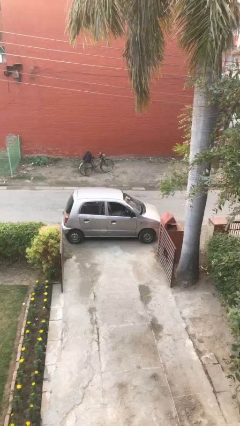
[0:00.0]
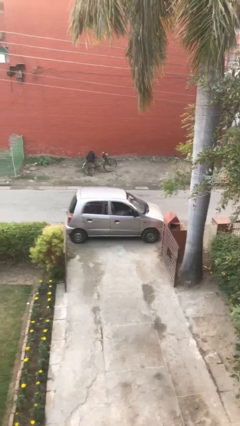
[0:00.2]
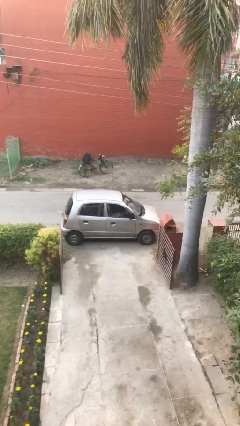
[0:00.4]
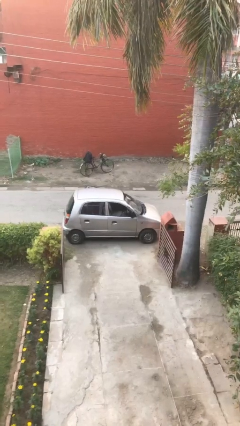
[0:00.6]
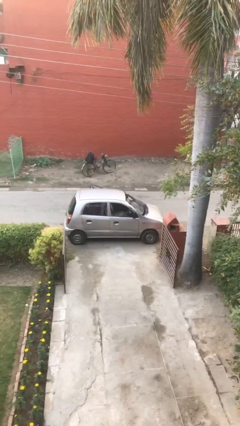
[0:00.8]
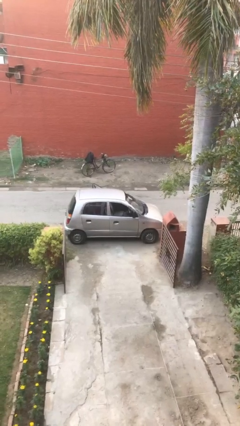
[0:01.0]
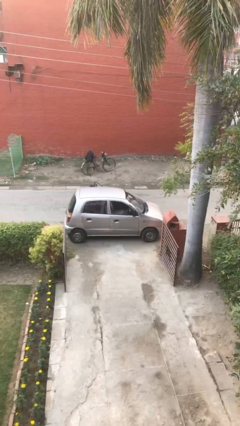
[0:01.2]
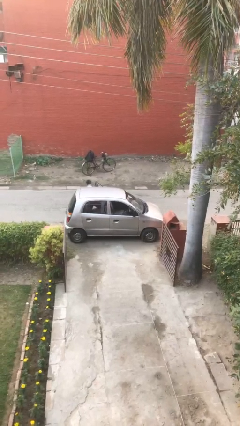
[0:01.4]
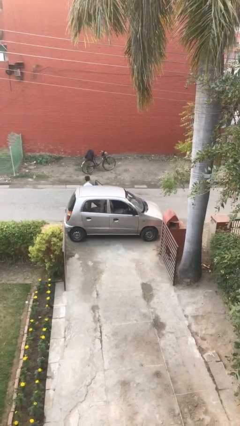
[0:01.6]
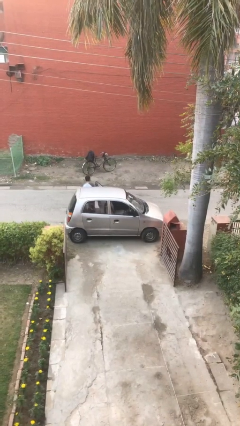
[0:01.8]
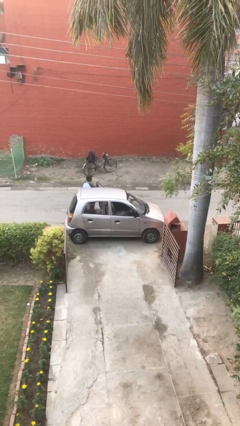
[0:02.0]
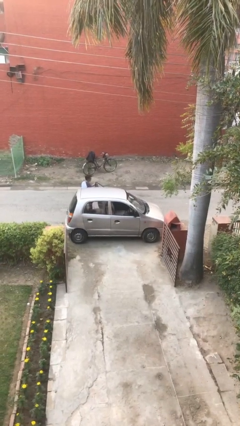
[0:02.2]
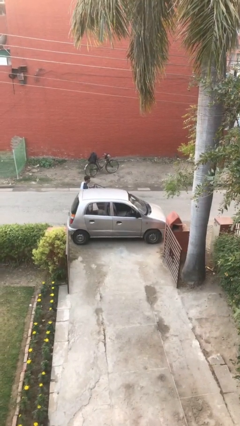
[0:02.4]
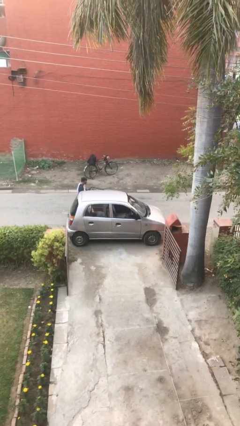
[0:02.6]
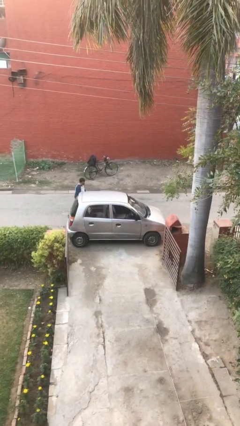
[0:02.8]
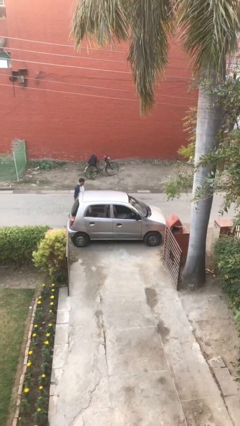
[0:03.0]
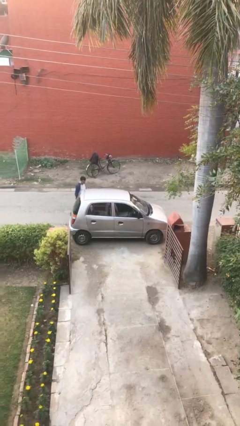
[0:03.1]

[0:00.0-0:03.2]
car drops off person

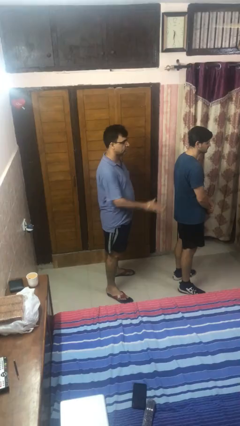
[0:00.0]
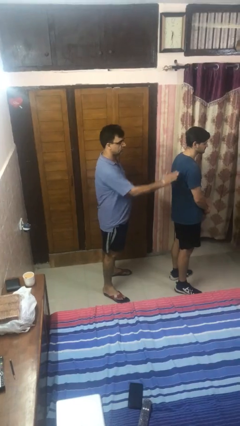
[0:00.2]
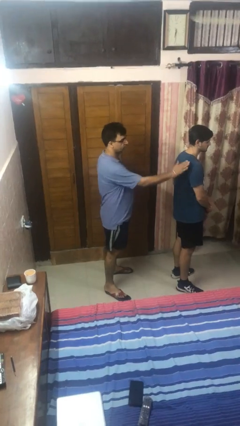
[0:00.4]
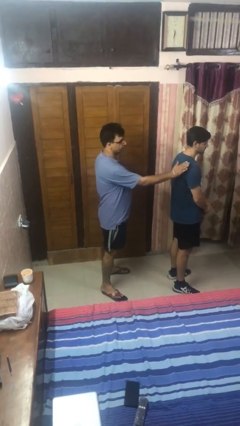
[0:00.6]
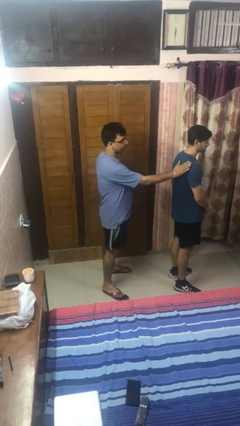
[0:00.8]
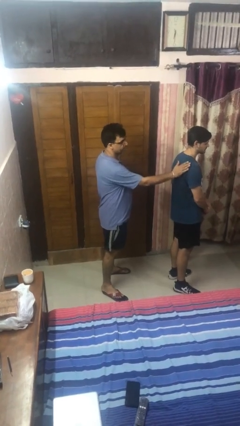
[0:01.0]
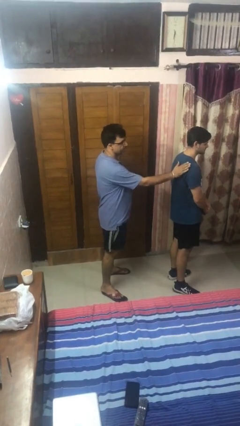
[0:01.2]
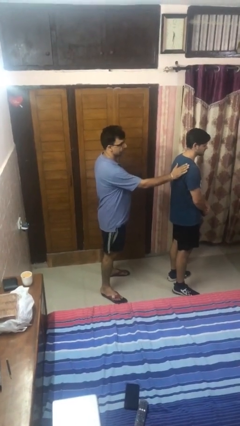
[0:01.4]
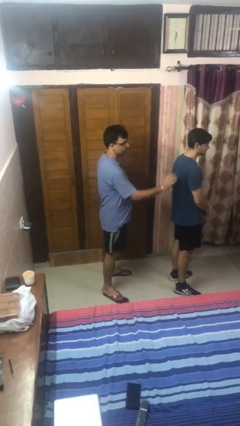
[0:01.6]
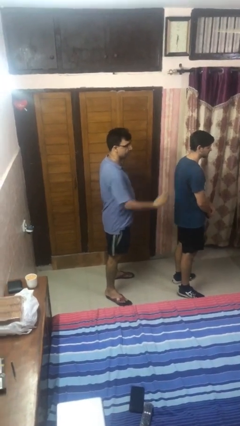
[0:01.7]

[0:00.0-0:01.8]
person touches back of person

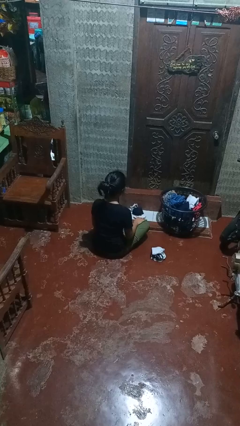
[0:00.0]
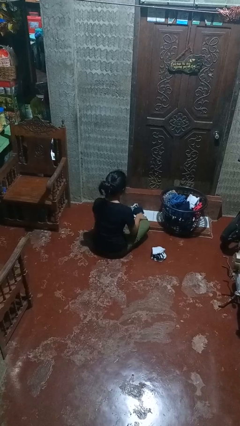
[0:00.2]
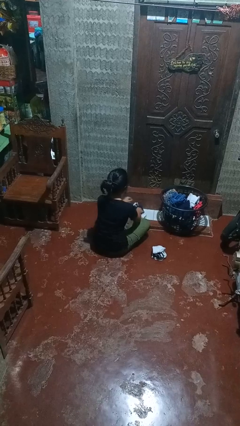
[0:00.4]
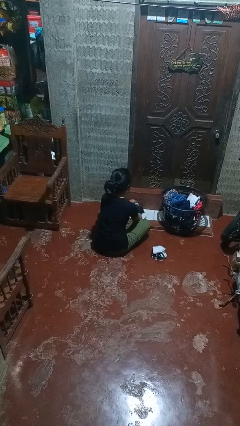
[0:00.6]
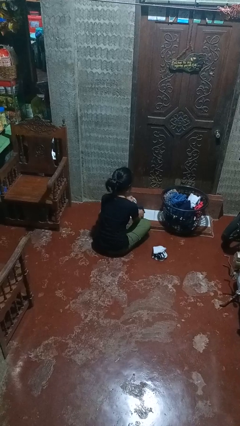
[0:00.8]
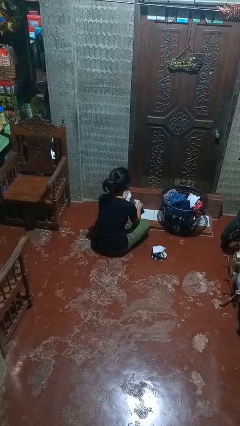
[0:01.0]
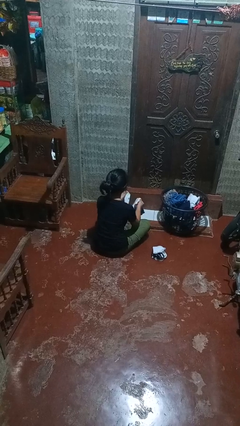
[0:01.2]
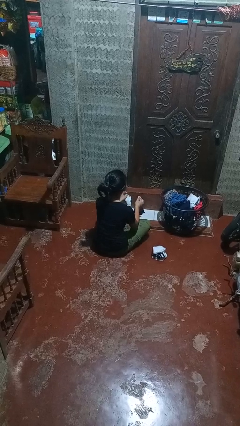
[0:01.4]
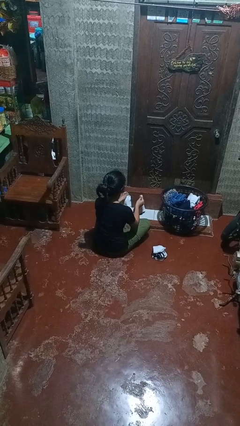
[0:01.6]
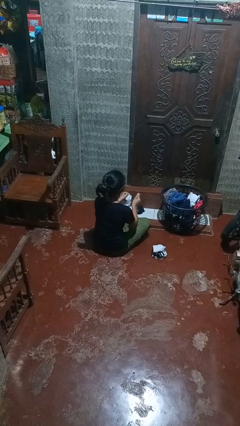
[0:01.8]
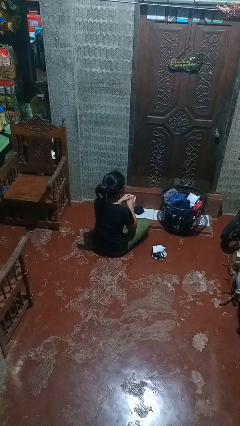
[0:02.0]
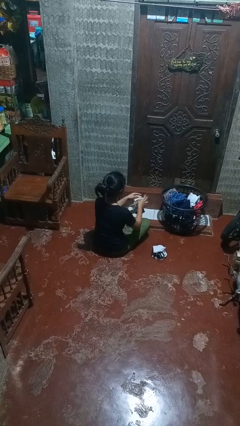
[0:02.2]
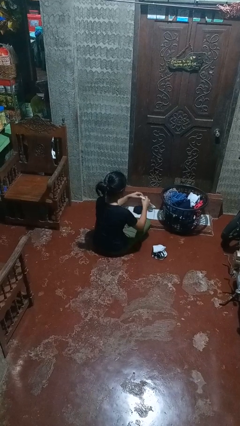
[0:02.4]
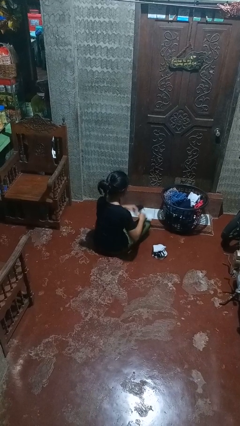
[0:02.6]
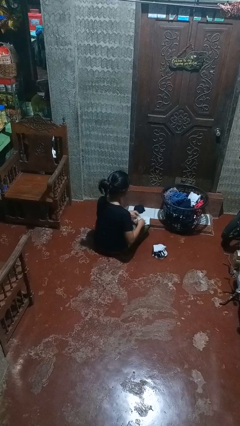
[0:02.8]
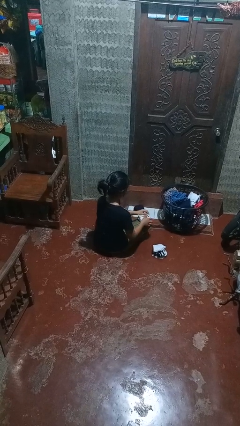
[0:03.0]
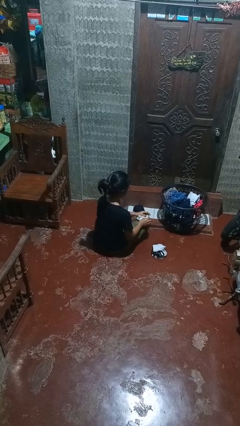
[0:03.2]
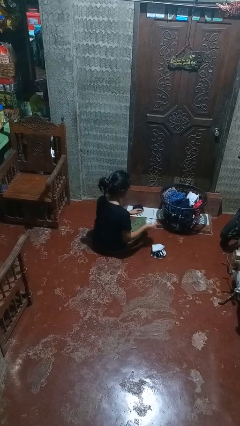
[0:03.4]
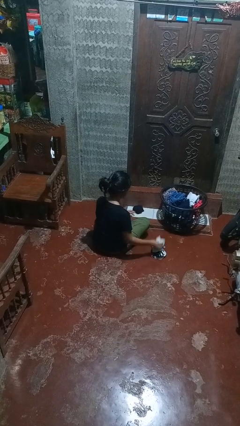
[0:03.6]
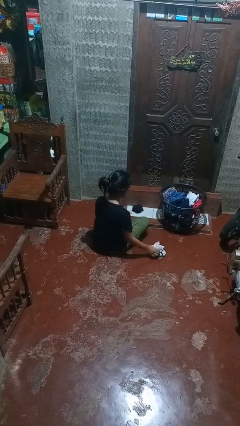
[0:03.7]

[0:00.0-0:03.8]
person folds socks

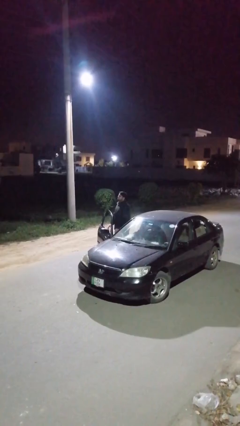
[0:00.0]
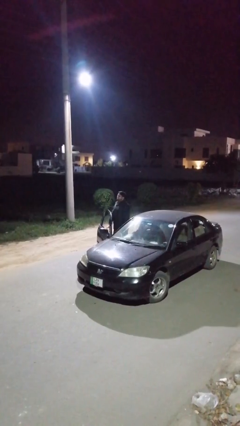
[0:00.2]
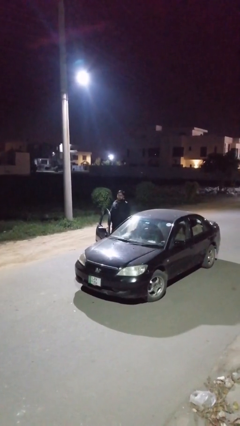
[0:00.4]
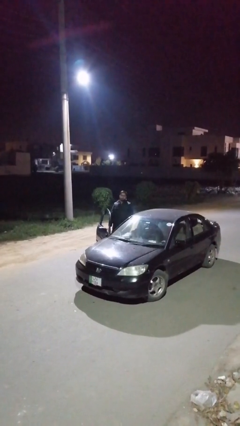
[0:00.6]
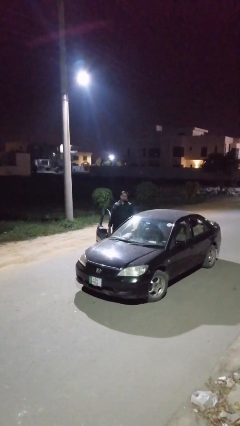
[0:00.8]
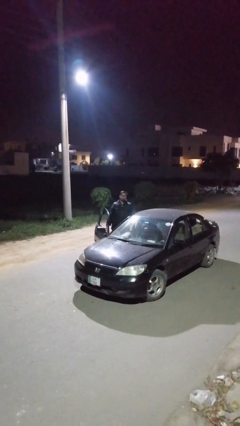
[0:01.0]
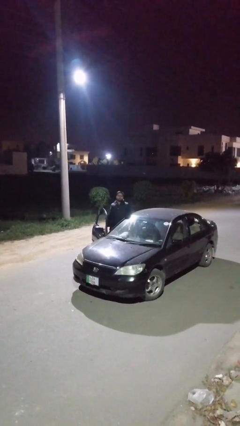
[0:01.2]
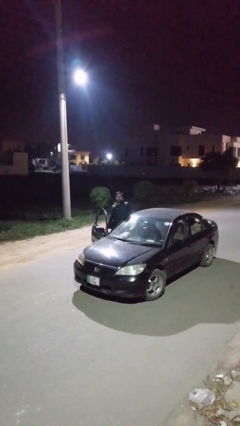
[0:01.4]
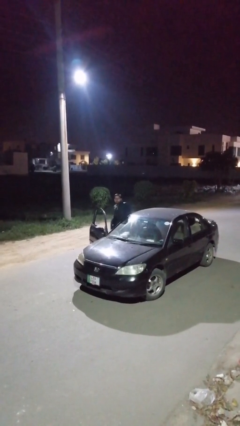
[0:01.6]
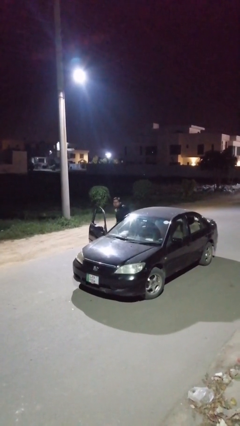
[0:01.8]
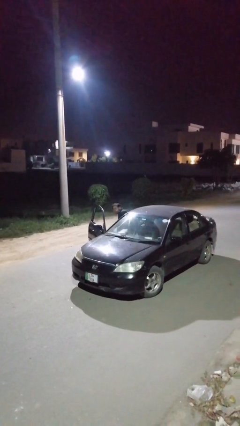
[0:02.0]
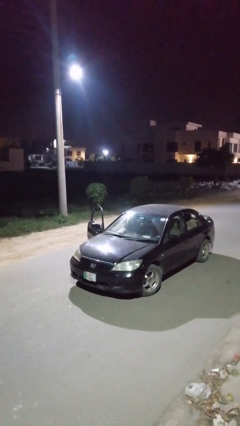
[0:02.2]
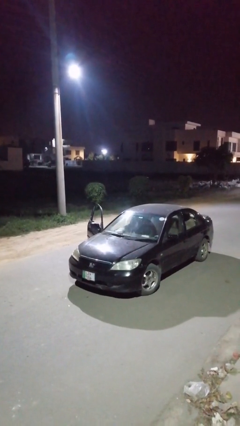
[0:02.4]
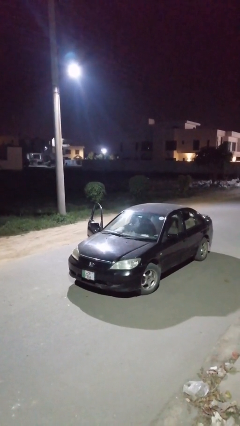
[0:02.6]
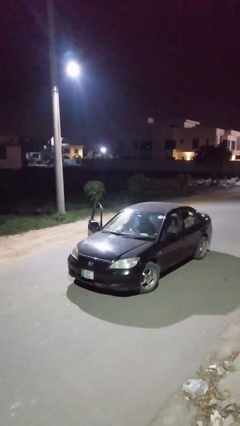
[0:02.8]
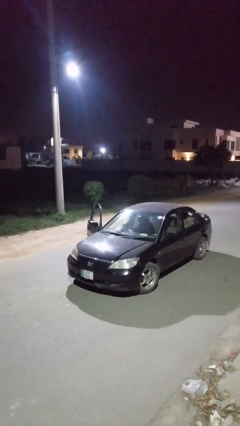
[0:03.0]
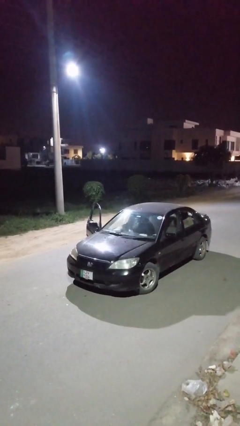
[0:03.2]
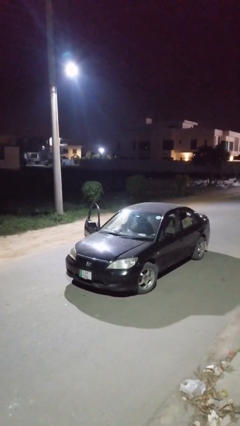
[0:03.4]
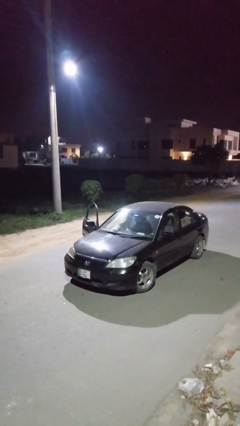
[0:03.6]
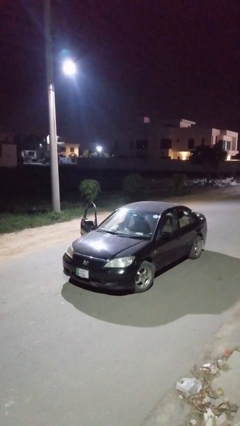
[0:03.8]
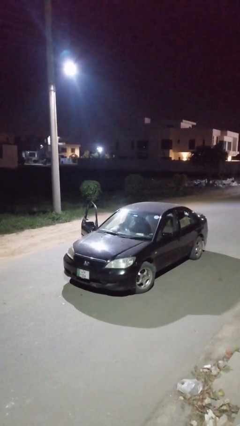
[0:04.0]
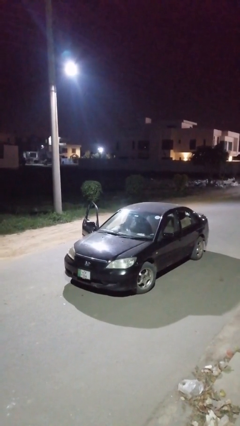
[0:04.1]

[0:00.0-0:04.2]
person enters car

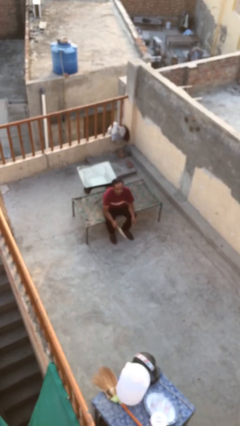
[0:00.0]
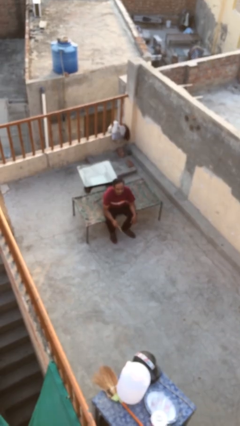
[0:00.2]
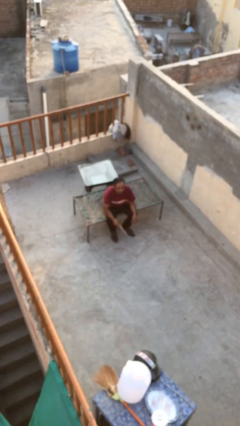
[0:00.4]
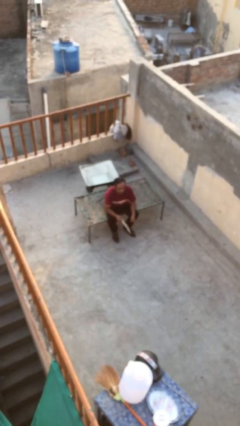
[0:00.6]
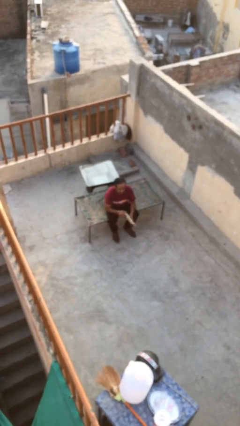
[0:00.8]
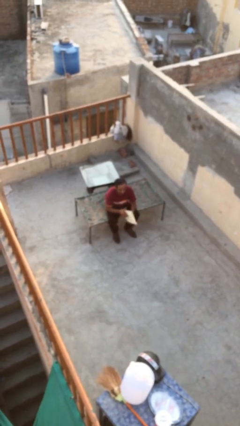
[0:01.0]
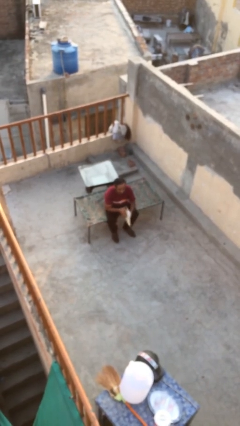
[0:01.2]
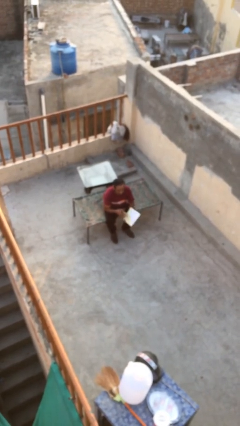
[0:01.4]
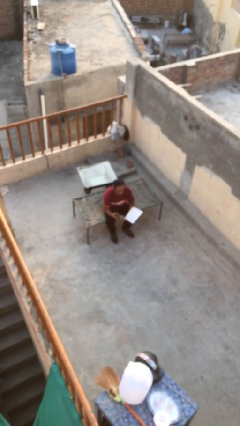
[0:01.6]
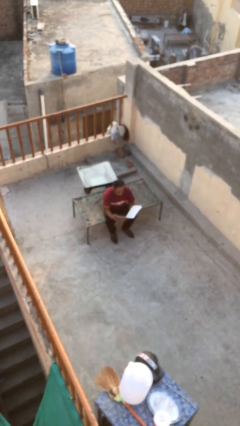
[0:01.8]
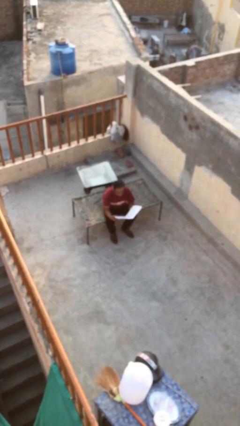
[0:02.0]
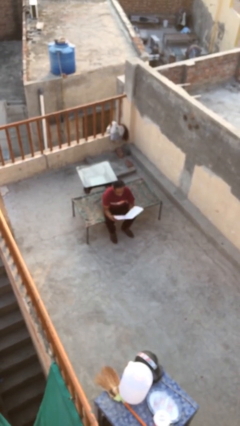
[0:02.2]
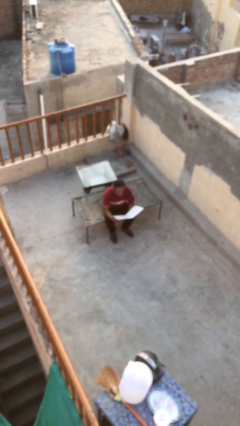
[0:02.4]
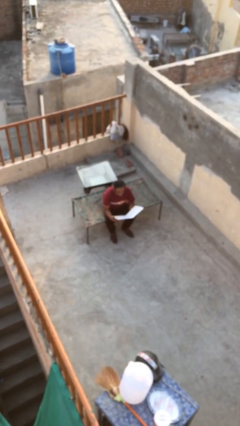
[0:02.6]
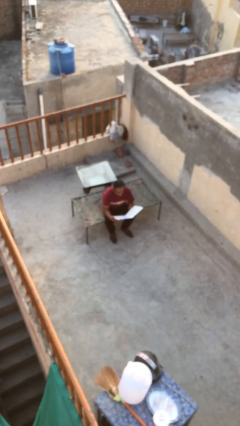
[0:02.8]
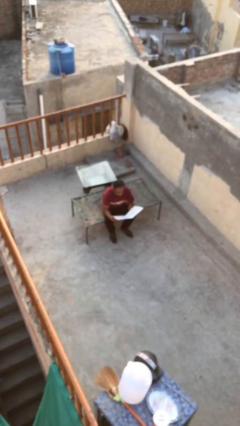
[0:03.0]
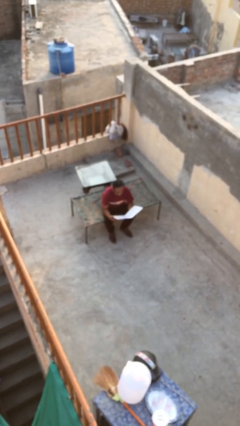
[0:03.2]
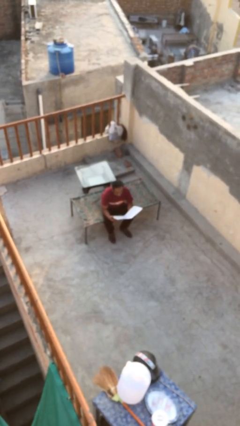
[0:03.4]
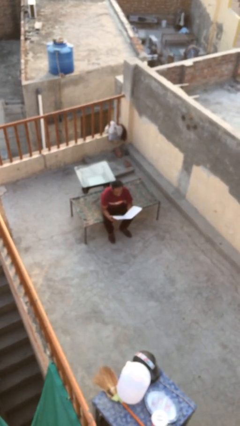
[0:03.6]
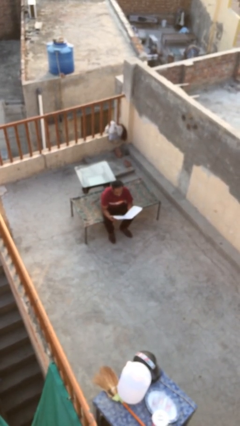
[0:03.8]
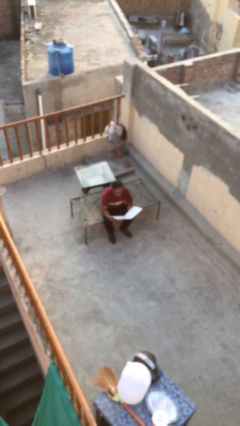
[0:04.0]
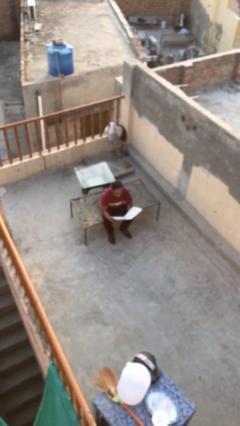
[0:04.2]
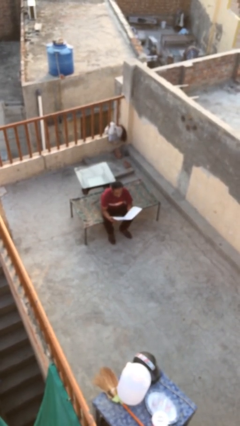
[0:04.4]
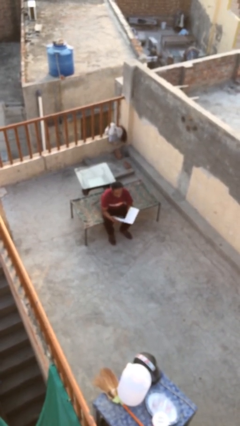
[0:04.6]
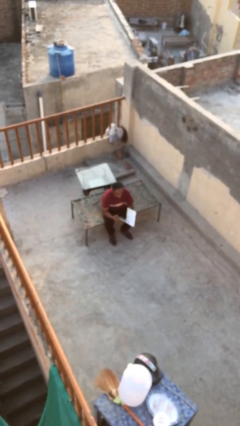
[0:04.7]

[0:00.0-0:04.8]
person reads document
